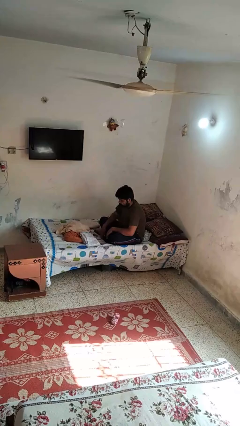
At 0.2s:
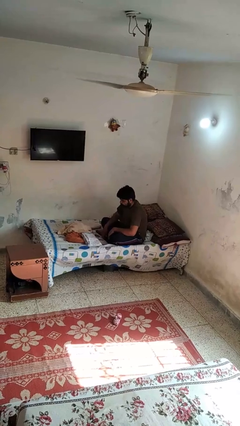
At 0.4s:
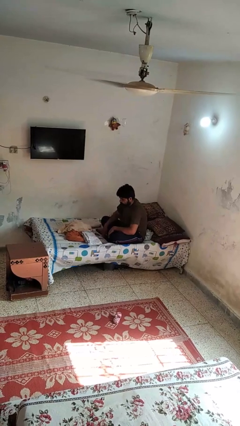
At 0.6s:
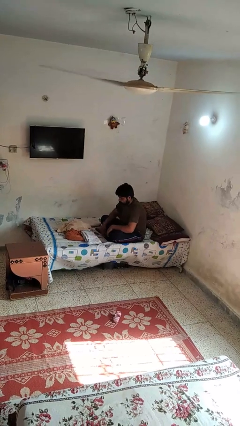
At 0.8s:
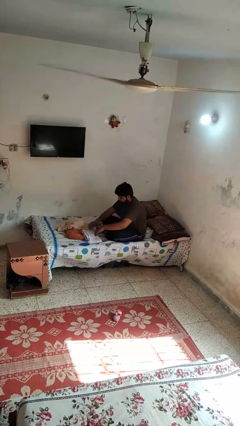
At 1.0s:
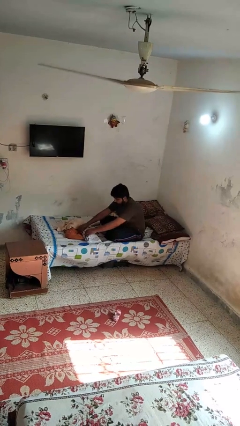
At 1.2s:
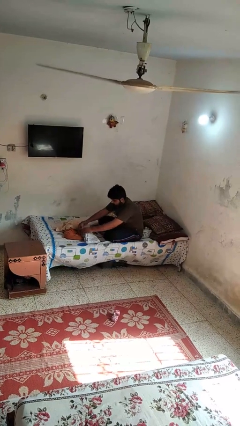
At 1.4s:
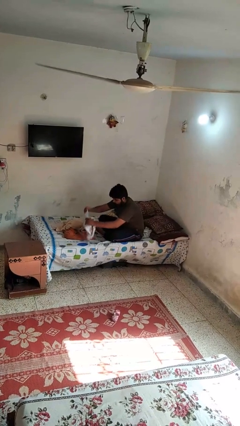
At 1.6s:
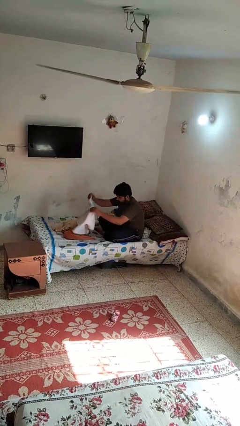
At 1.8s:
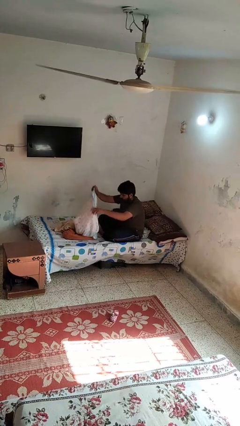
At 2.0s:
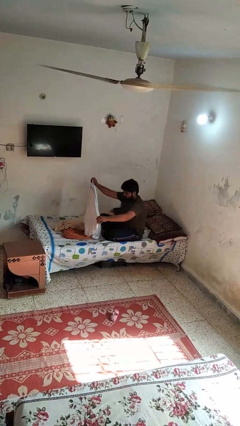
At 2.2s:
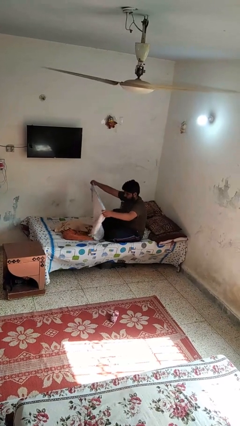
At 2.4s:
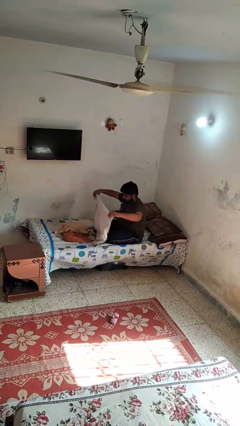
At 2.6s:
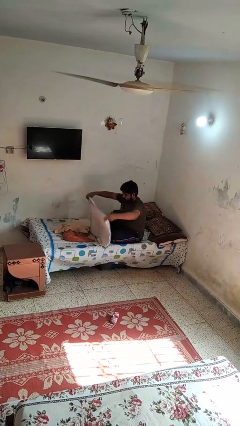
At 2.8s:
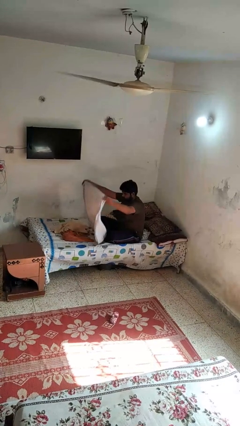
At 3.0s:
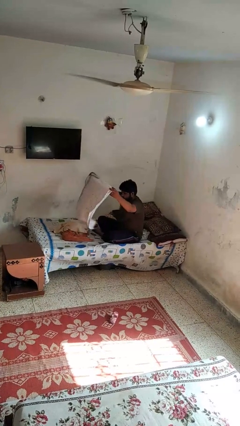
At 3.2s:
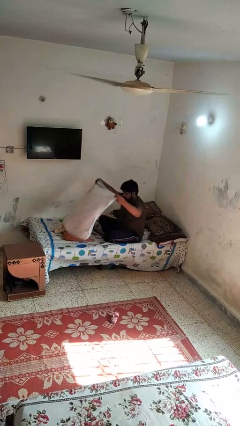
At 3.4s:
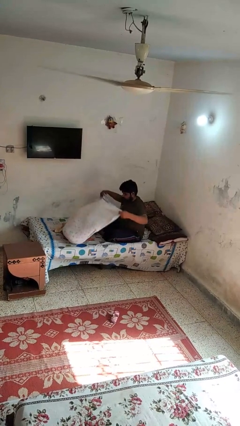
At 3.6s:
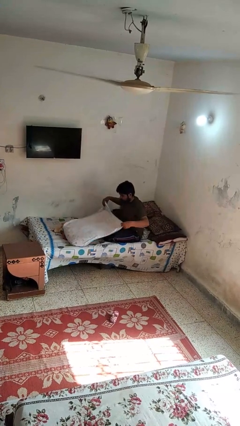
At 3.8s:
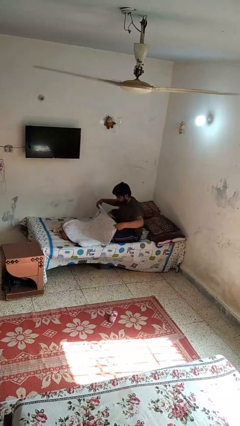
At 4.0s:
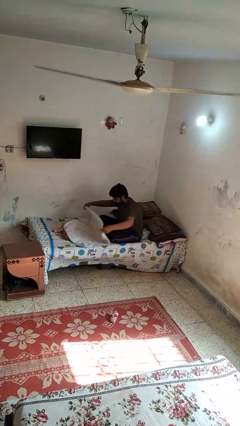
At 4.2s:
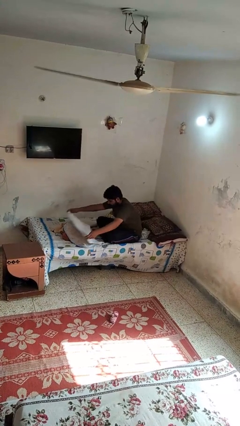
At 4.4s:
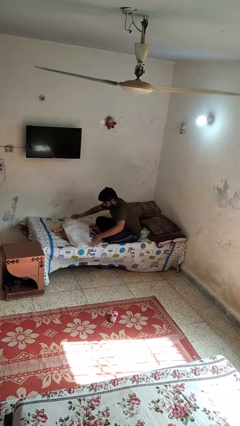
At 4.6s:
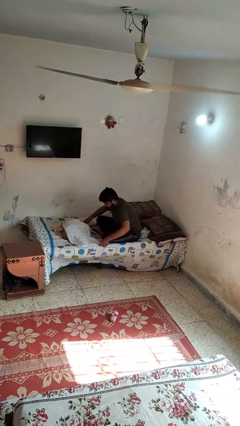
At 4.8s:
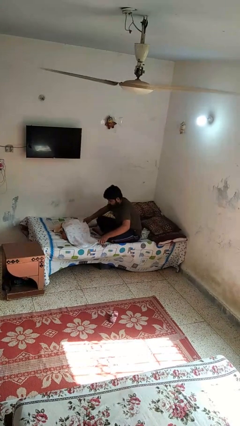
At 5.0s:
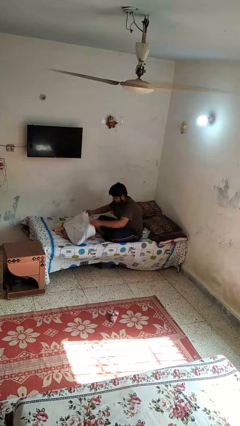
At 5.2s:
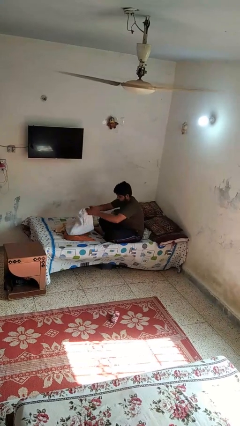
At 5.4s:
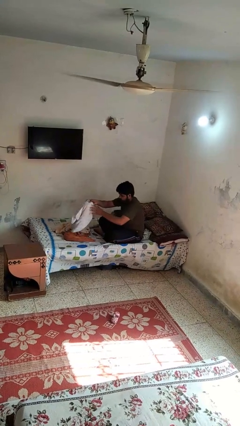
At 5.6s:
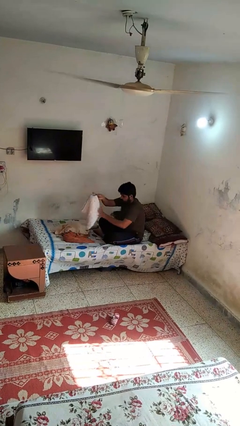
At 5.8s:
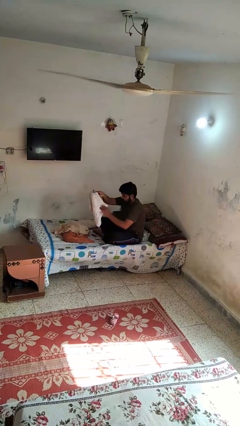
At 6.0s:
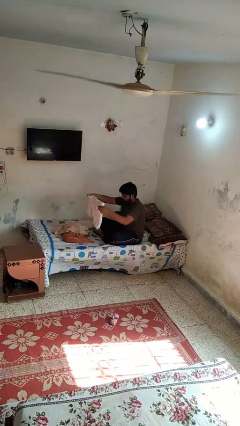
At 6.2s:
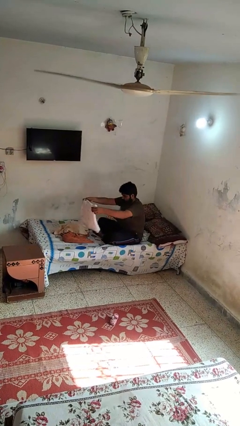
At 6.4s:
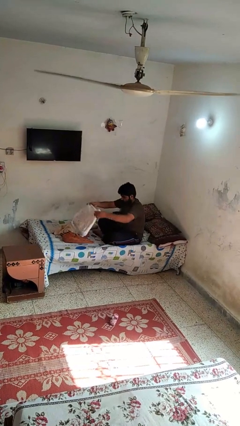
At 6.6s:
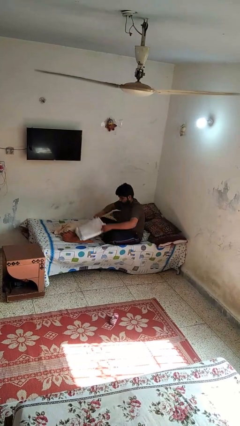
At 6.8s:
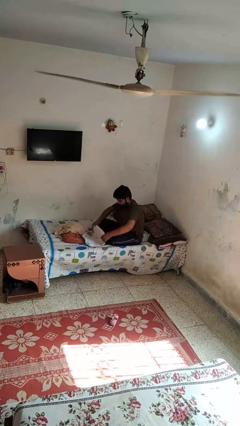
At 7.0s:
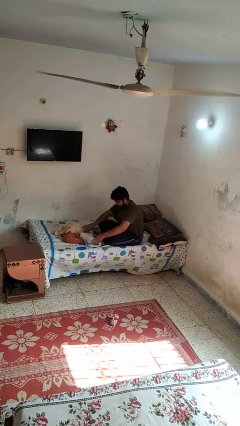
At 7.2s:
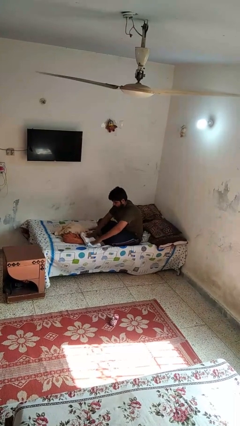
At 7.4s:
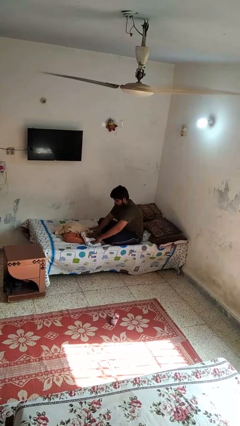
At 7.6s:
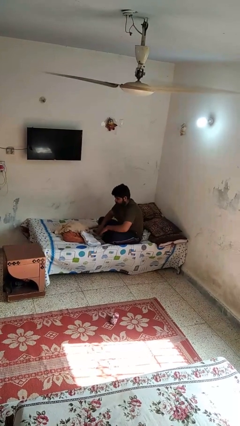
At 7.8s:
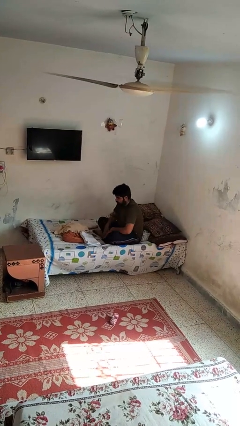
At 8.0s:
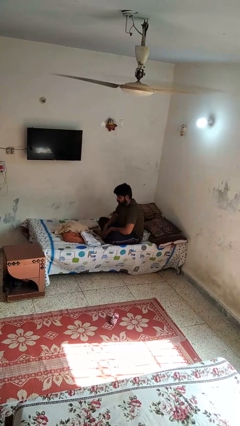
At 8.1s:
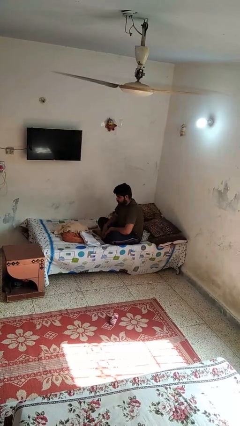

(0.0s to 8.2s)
person folds towel

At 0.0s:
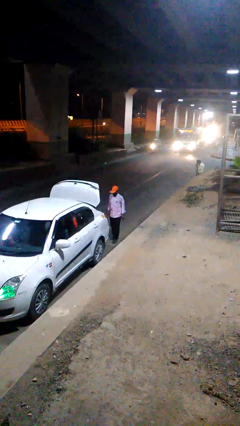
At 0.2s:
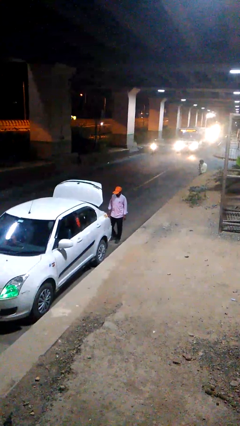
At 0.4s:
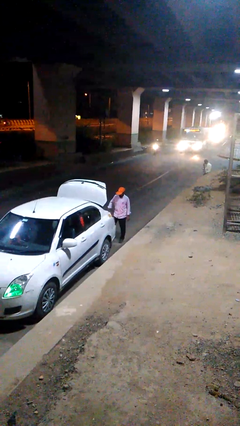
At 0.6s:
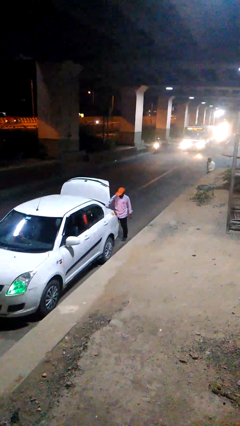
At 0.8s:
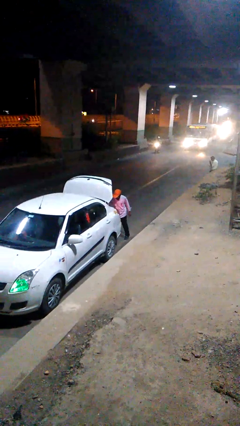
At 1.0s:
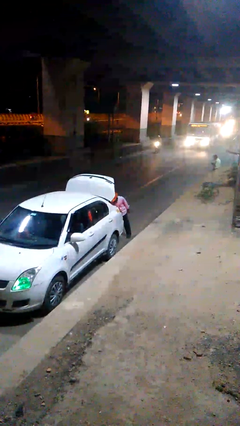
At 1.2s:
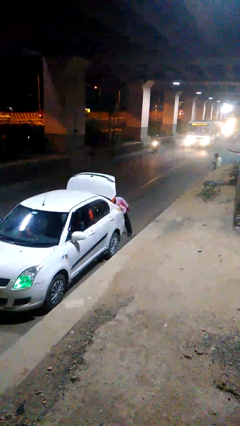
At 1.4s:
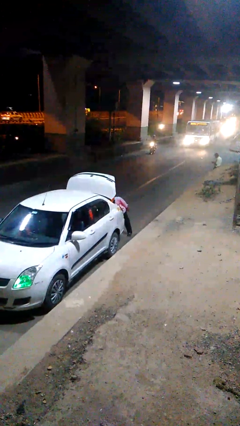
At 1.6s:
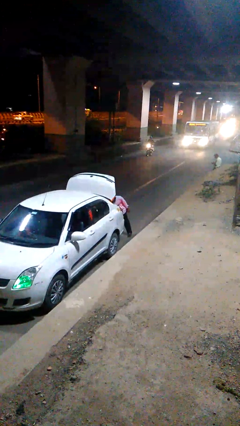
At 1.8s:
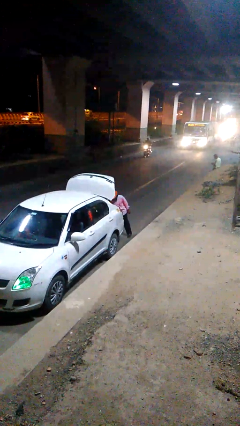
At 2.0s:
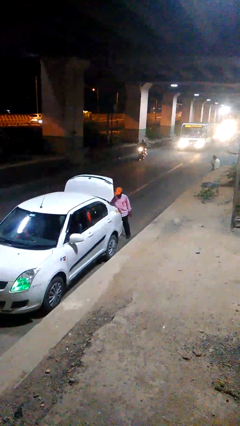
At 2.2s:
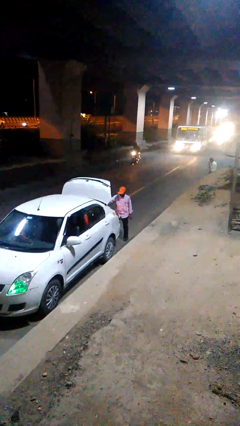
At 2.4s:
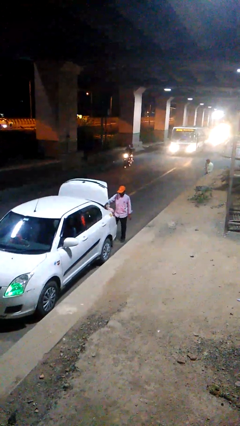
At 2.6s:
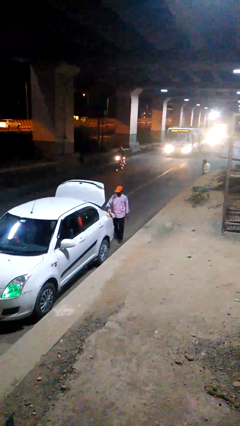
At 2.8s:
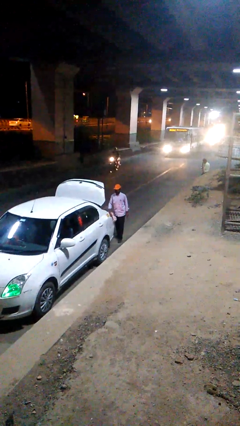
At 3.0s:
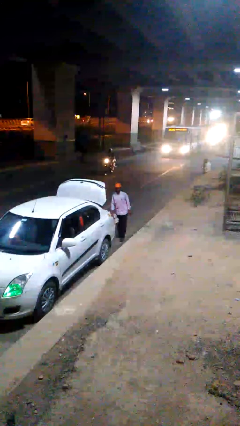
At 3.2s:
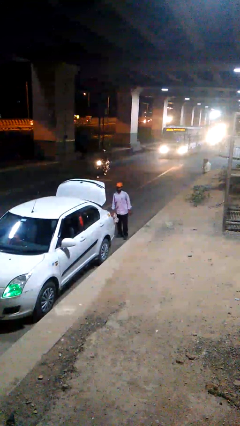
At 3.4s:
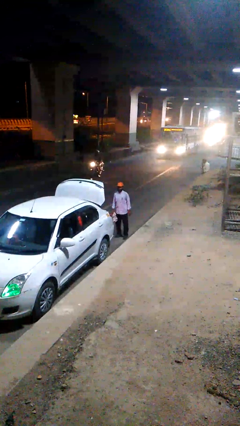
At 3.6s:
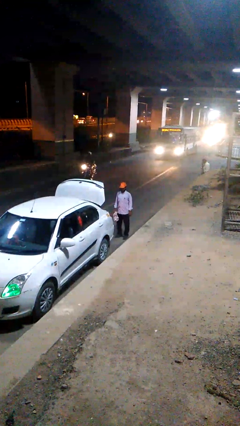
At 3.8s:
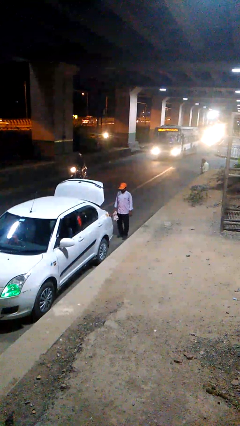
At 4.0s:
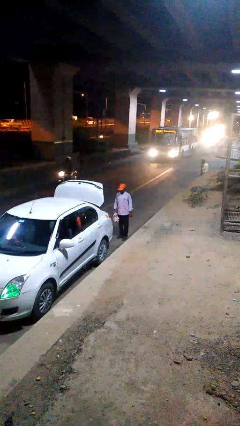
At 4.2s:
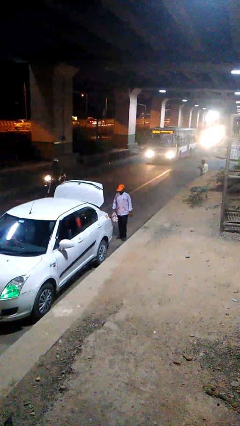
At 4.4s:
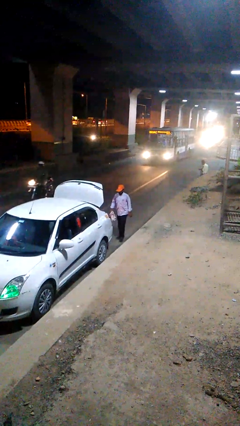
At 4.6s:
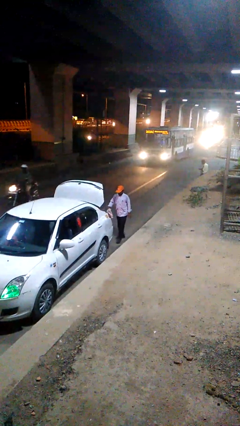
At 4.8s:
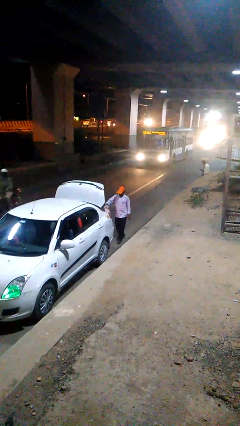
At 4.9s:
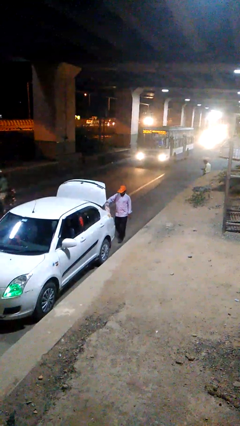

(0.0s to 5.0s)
person unloads car

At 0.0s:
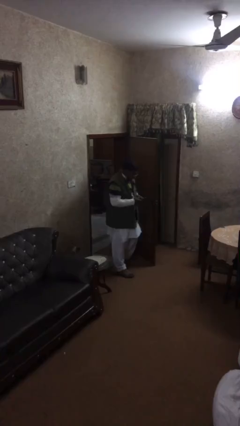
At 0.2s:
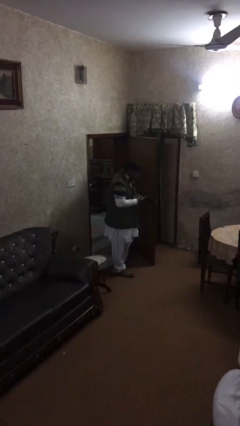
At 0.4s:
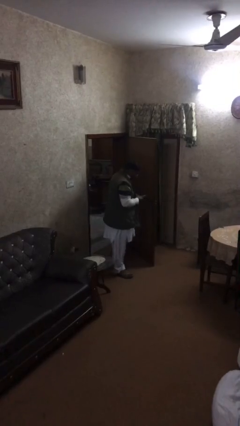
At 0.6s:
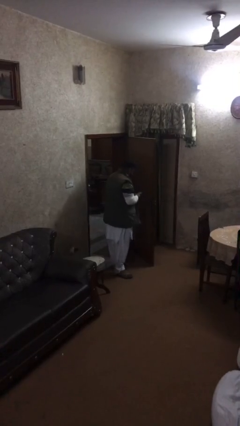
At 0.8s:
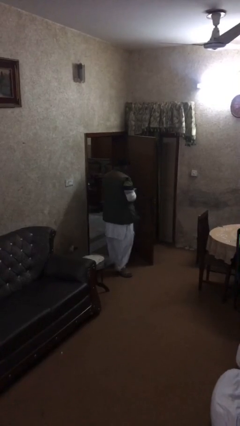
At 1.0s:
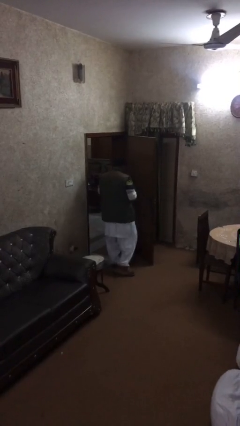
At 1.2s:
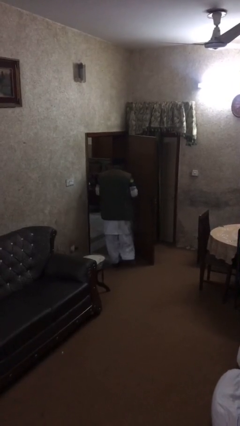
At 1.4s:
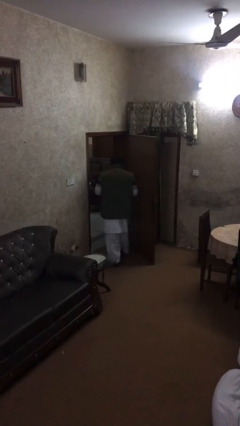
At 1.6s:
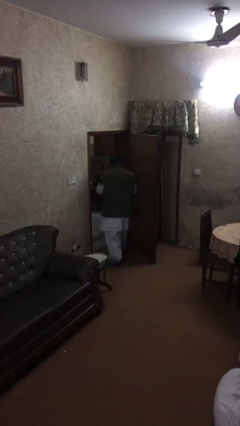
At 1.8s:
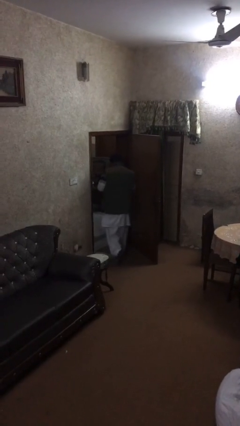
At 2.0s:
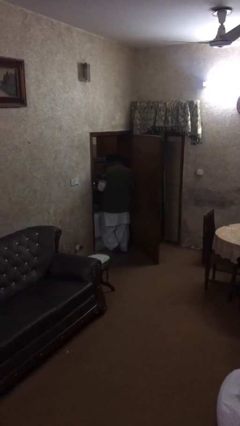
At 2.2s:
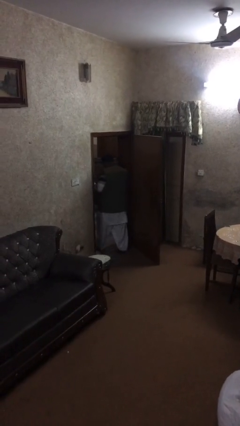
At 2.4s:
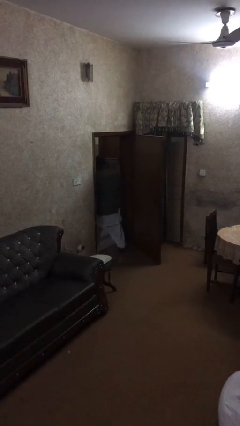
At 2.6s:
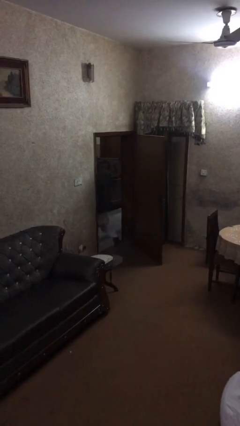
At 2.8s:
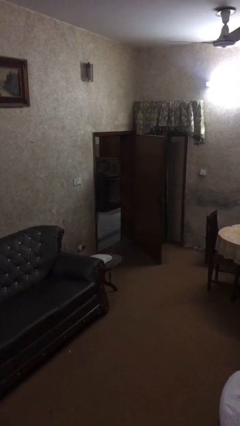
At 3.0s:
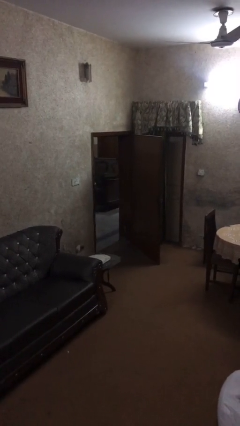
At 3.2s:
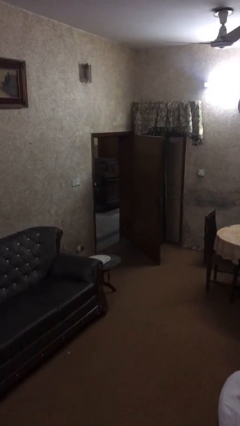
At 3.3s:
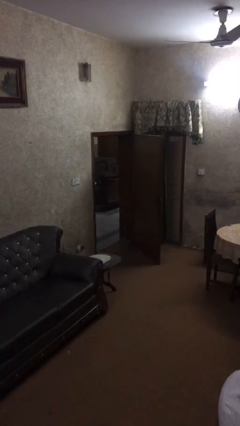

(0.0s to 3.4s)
person exits scene through structure

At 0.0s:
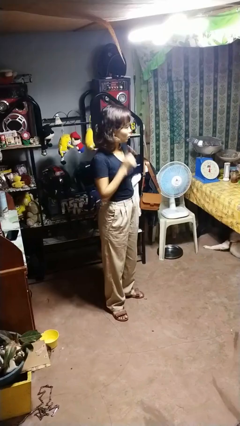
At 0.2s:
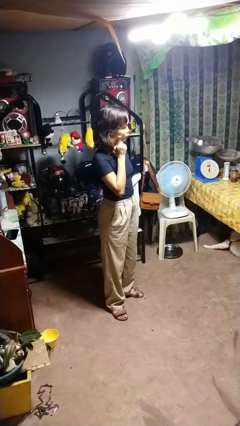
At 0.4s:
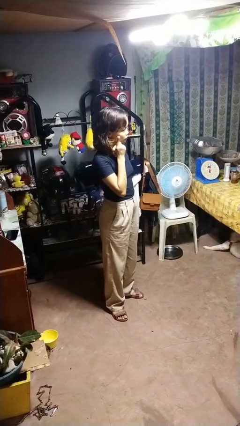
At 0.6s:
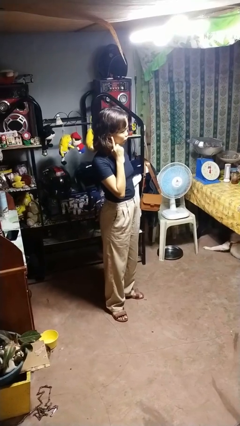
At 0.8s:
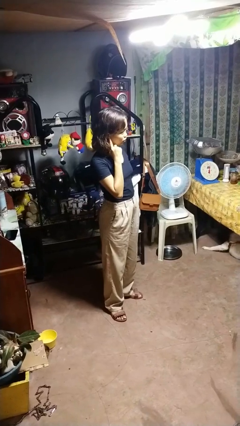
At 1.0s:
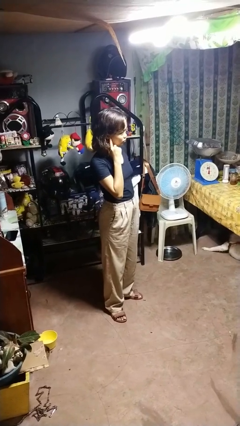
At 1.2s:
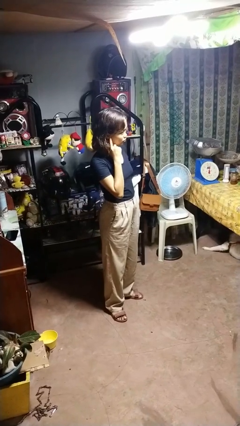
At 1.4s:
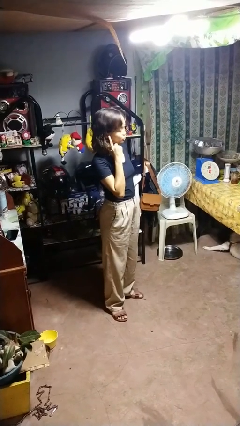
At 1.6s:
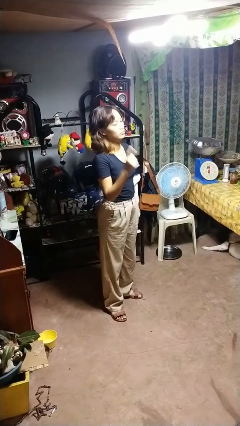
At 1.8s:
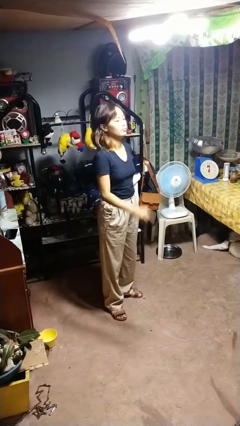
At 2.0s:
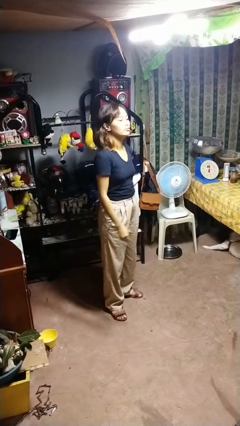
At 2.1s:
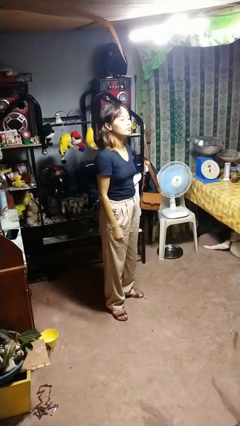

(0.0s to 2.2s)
person gestures listen closely
